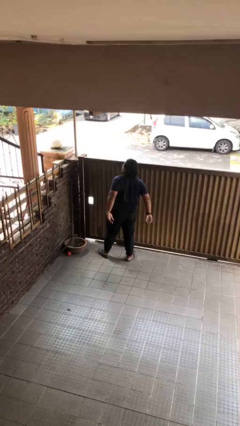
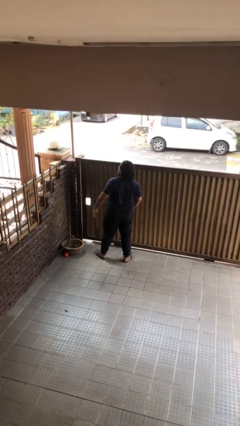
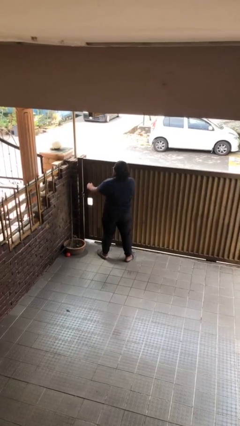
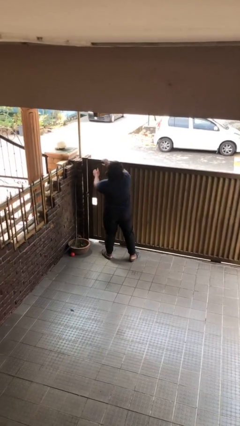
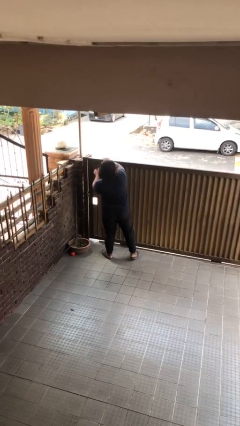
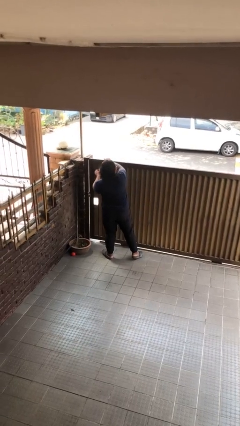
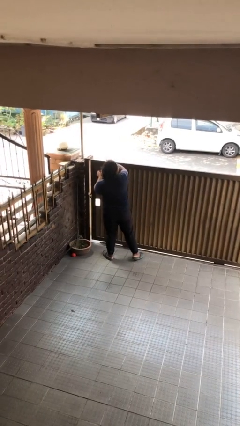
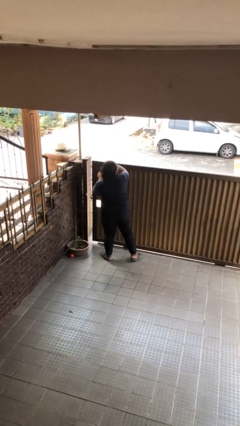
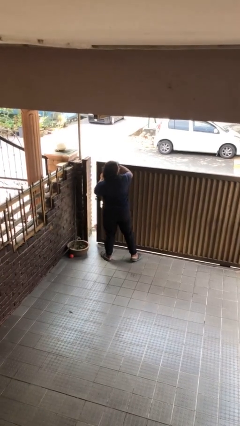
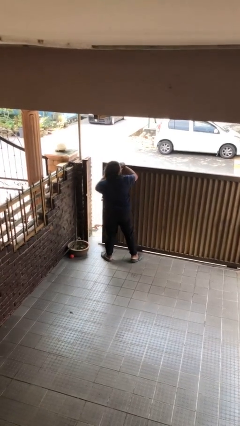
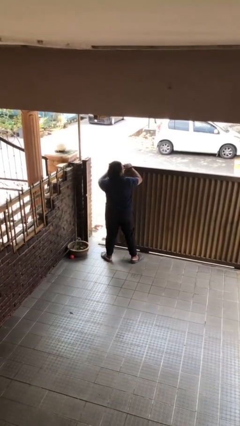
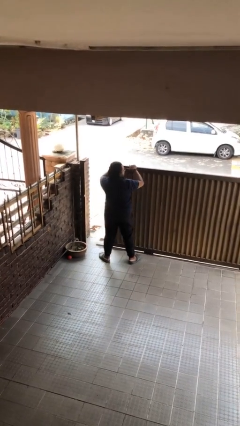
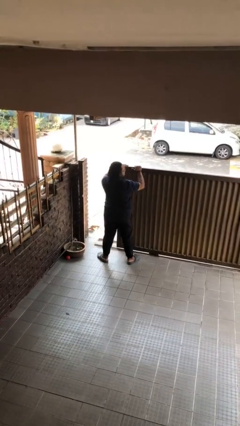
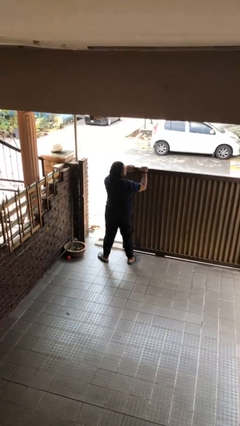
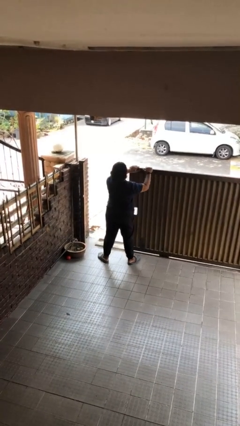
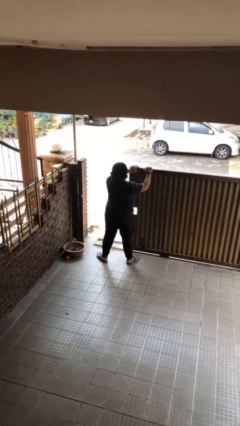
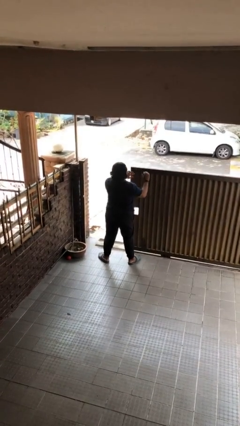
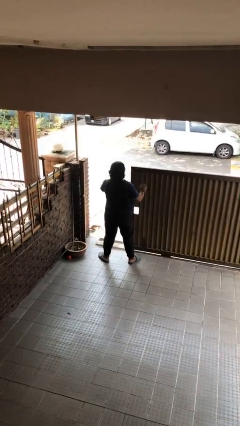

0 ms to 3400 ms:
person opens facility door

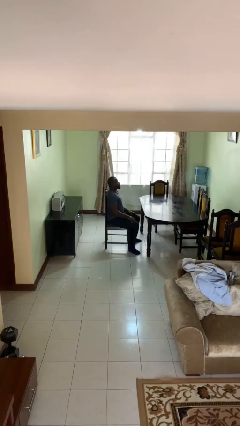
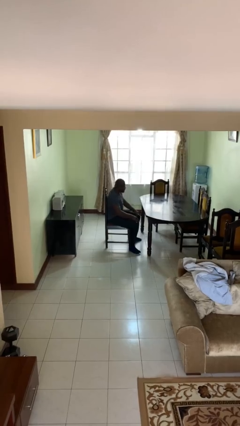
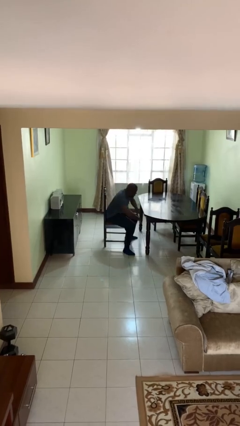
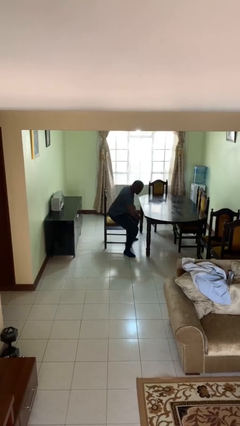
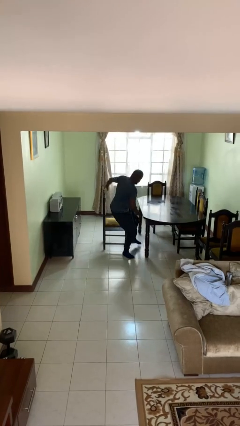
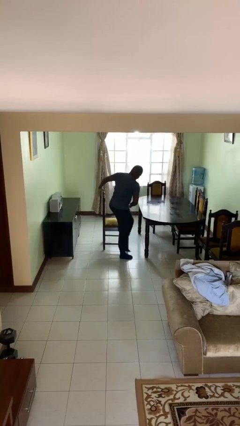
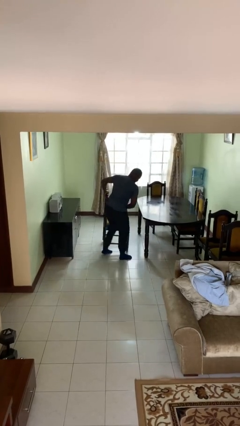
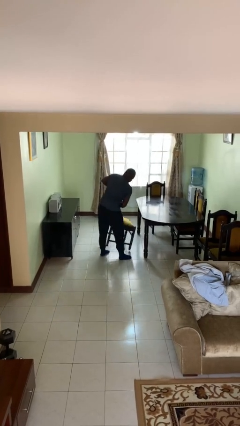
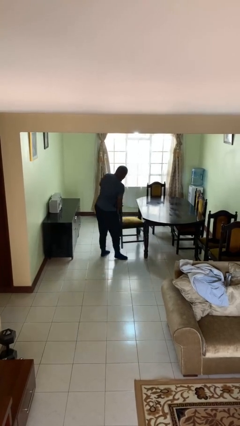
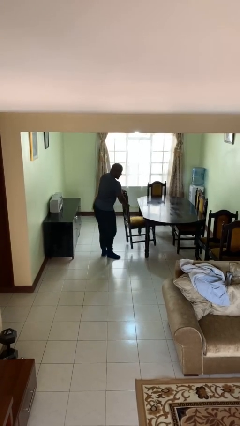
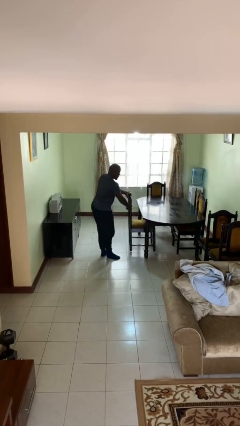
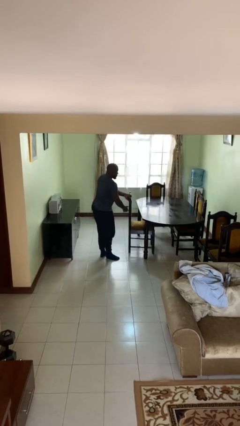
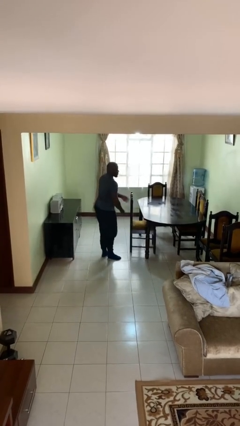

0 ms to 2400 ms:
person stands up

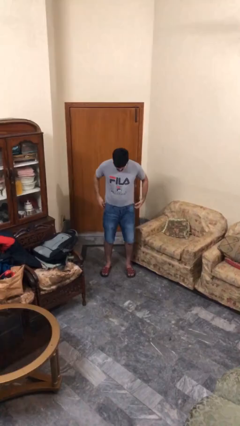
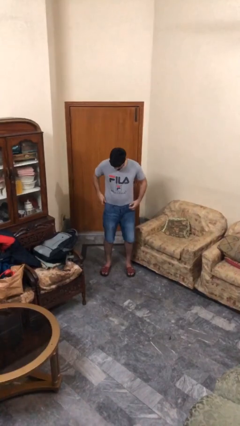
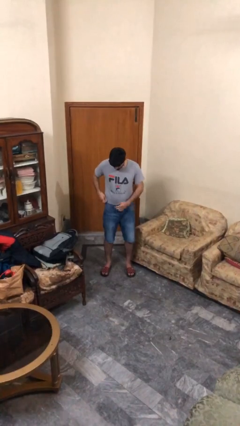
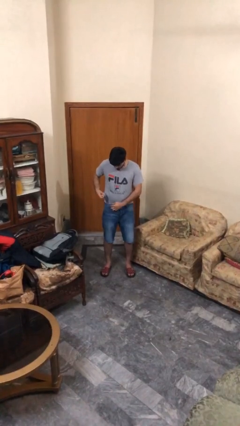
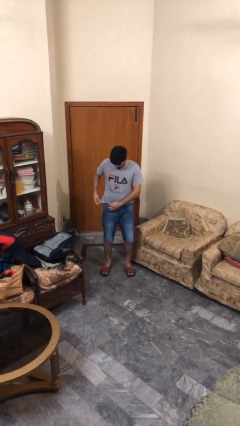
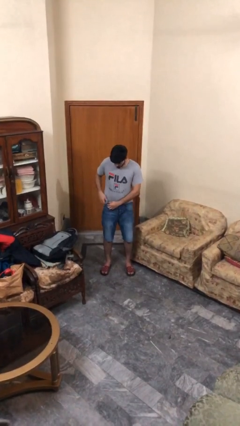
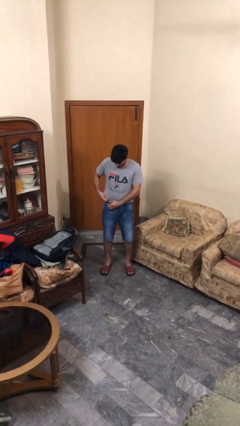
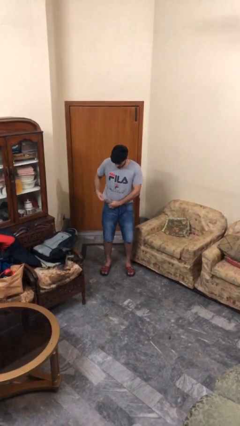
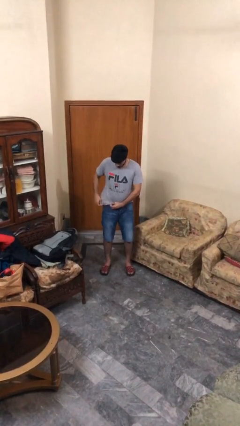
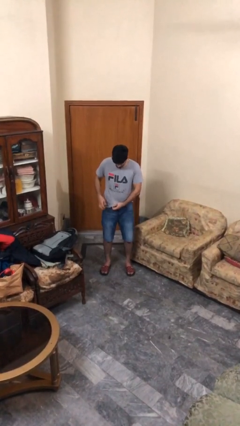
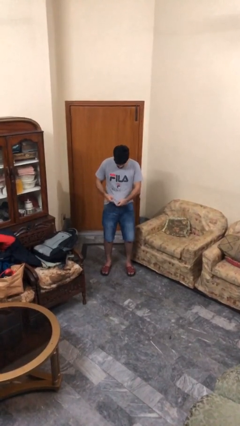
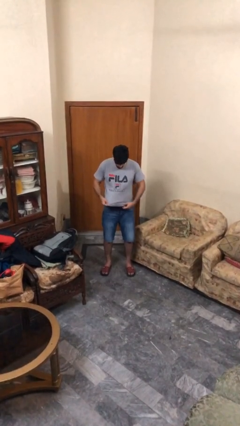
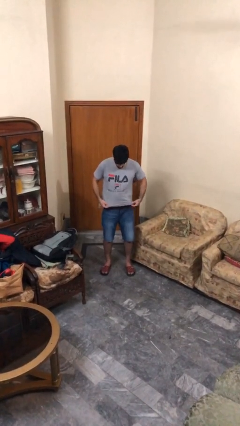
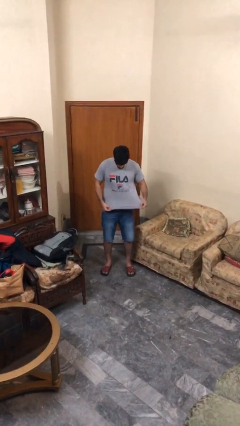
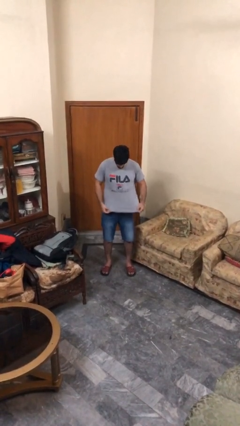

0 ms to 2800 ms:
person untucks shirt

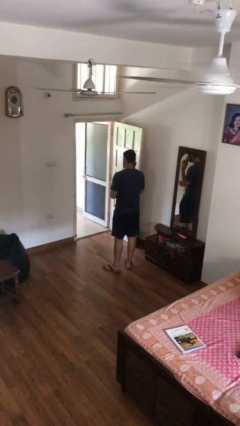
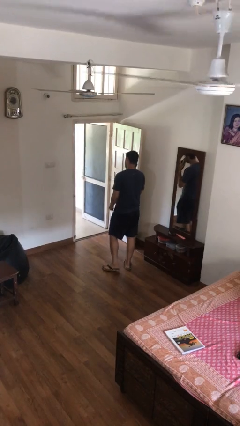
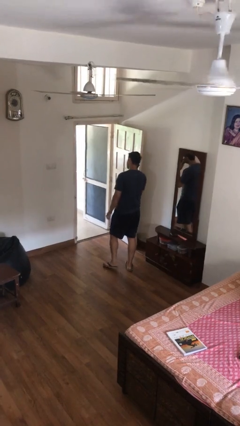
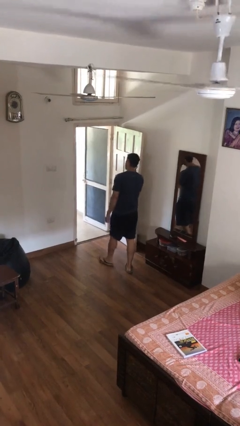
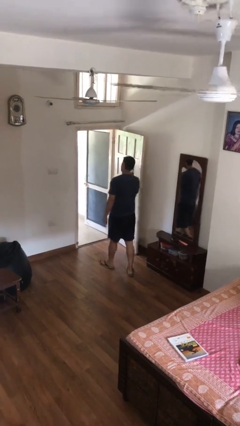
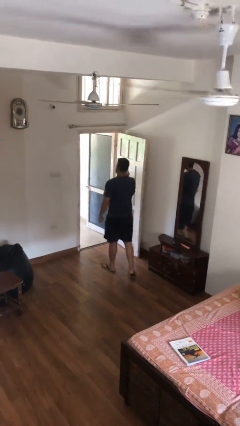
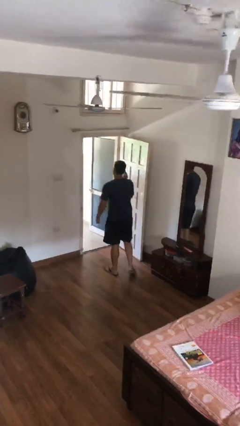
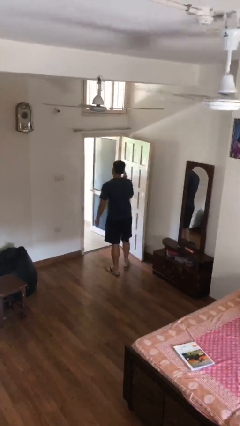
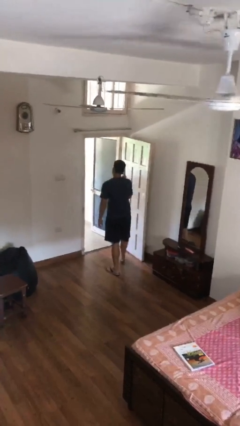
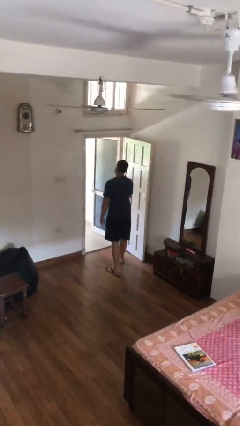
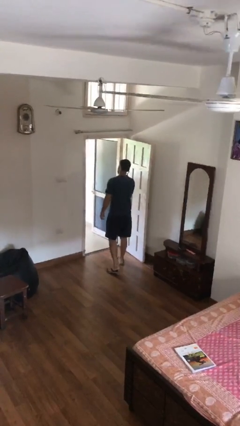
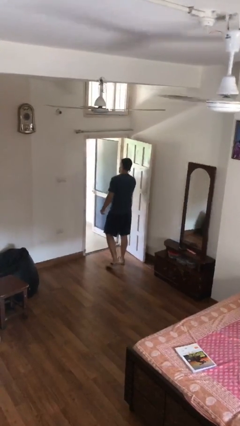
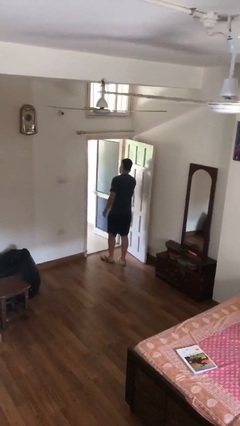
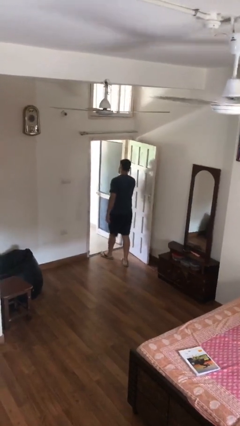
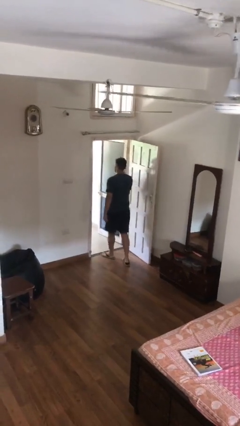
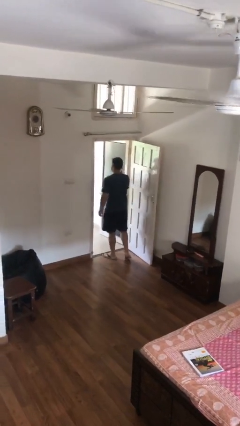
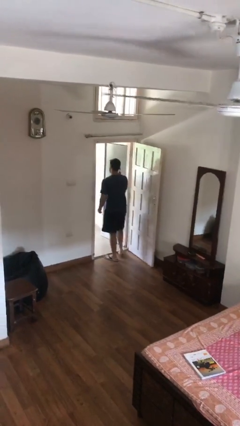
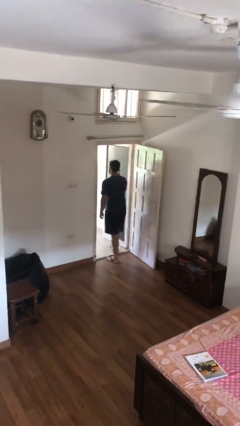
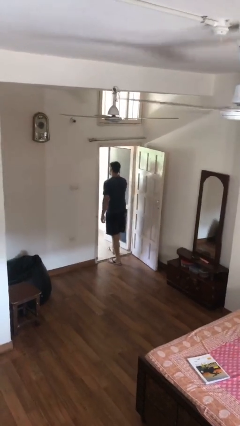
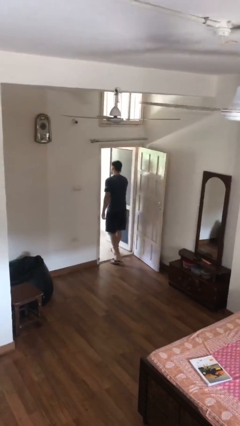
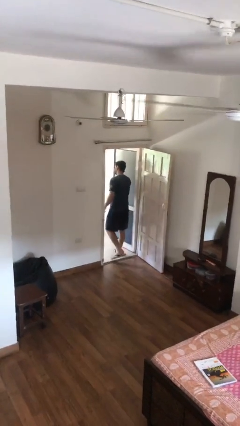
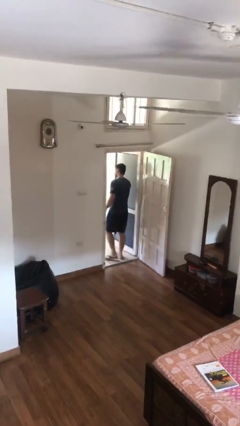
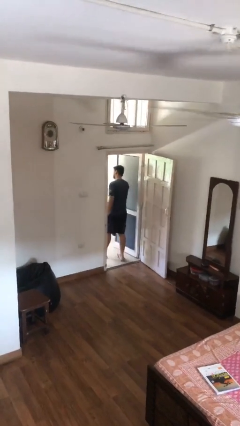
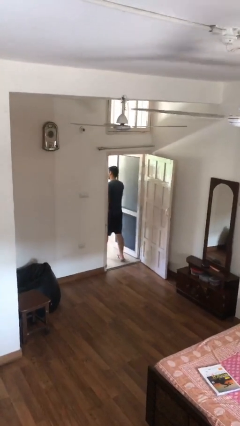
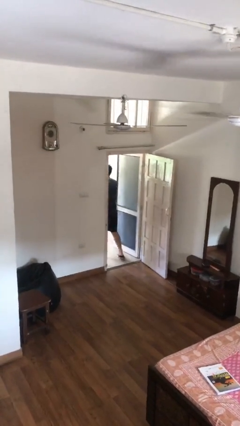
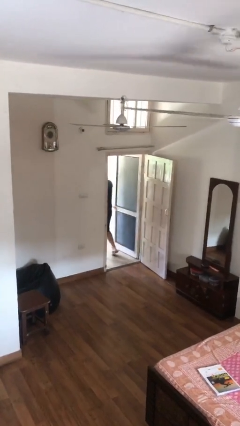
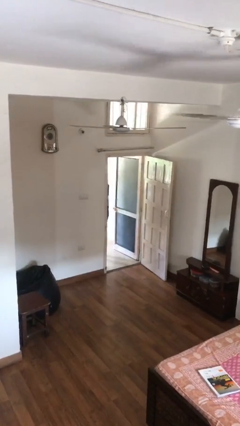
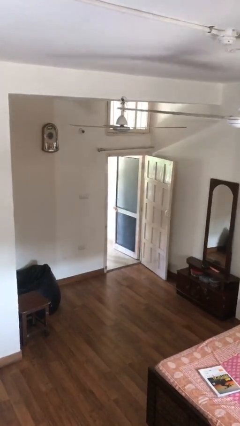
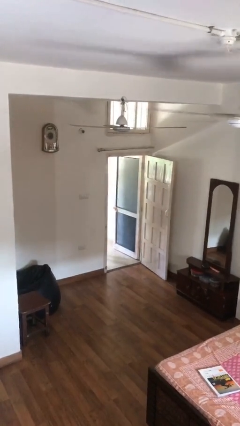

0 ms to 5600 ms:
person exits scene through structure

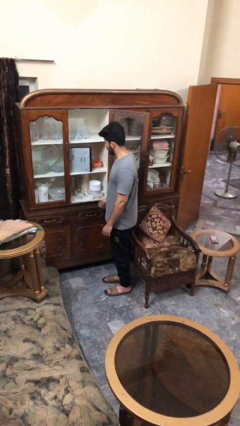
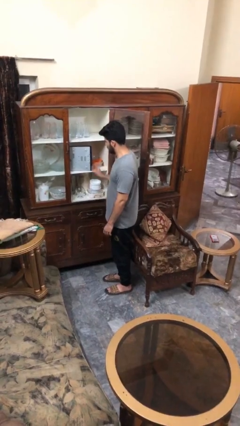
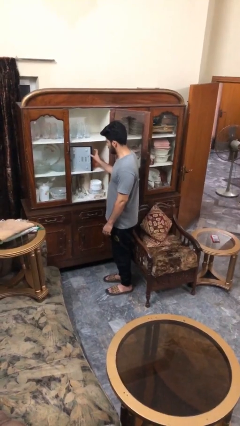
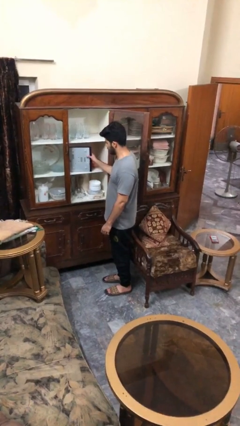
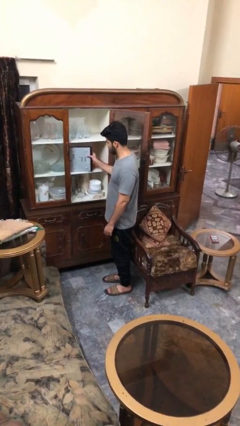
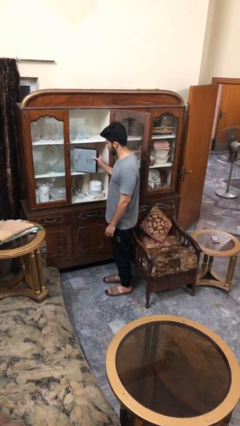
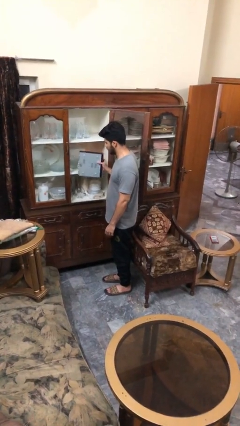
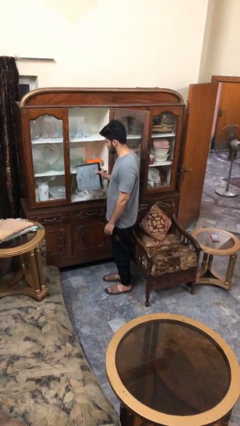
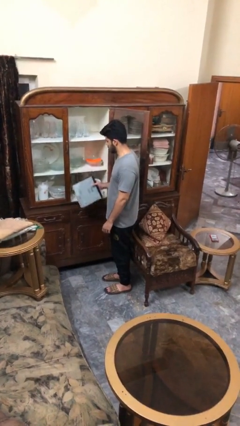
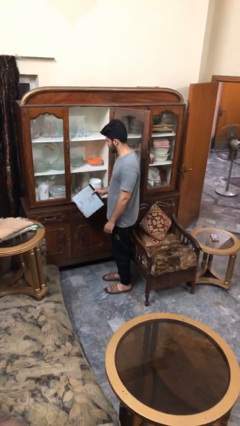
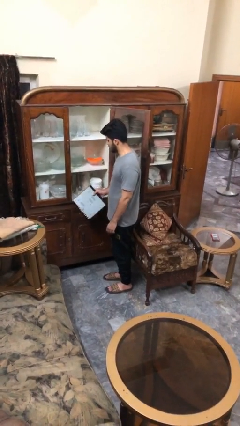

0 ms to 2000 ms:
person picks up object from cabinet

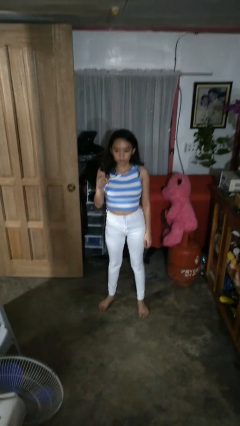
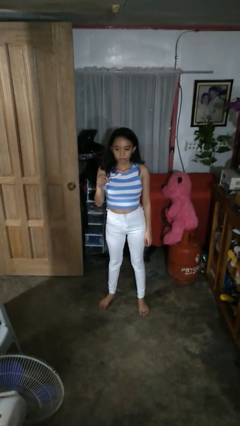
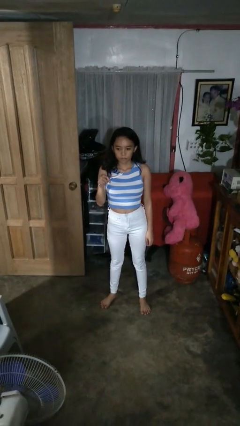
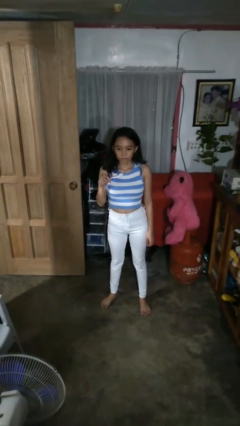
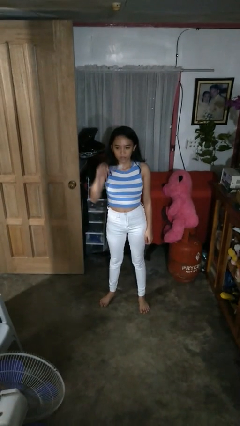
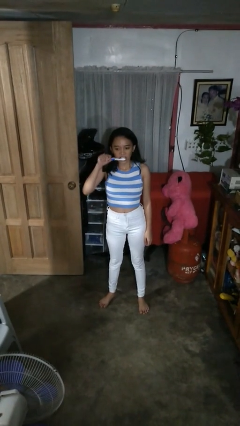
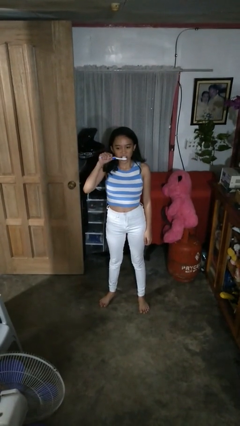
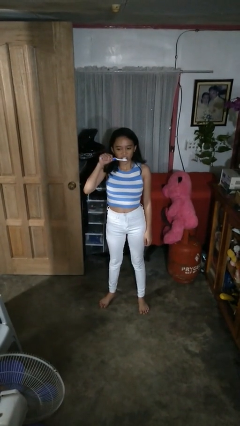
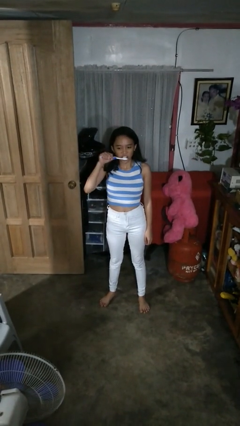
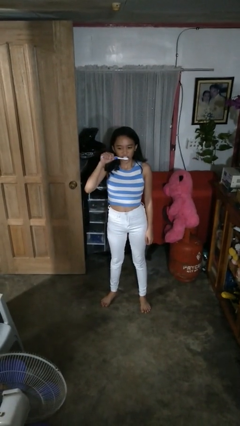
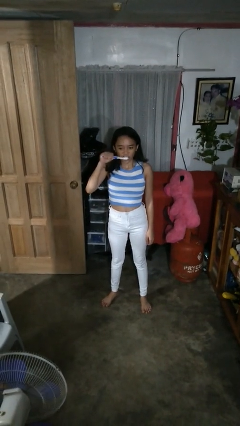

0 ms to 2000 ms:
person brushes teeth
